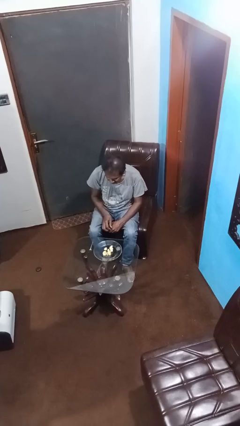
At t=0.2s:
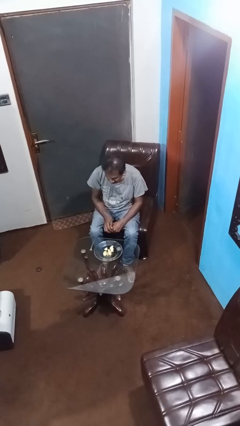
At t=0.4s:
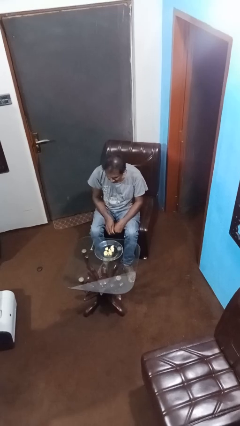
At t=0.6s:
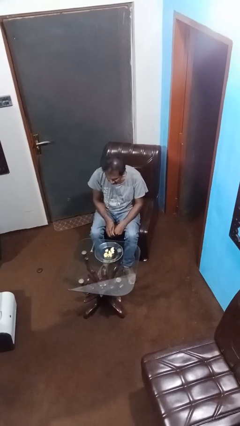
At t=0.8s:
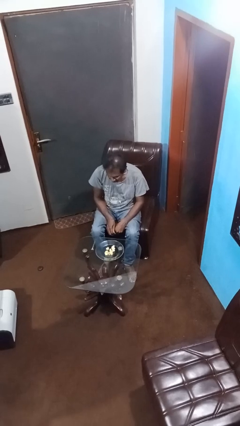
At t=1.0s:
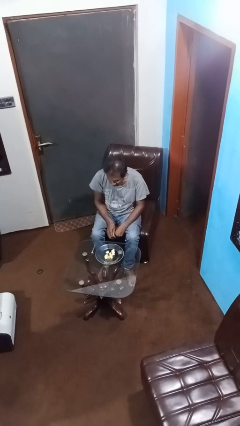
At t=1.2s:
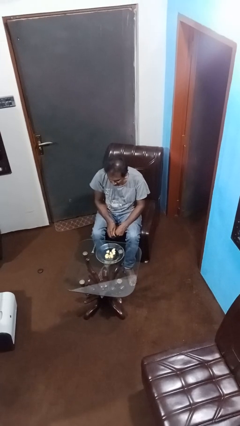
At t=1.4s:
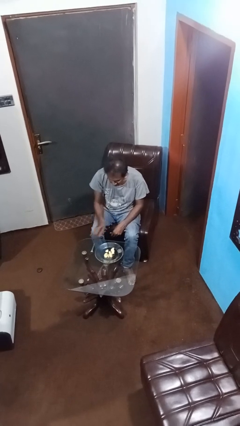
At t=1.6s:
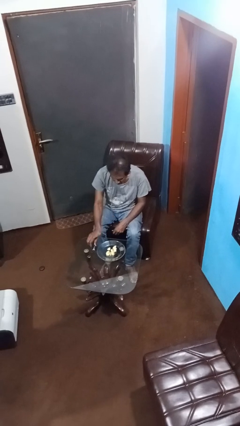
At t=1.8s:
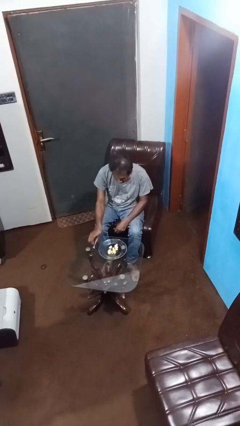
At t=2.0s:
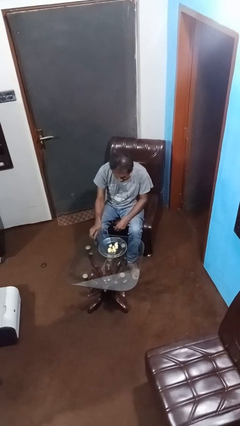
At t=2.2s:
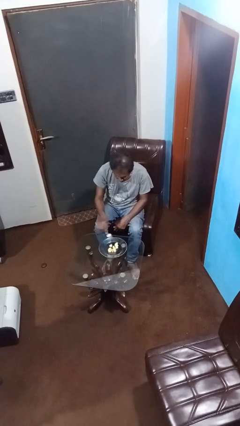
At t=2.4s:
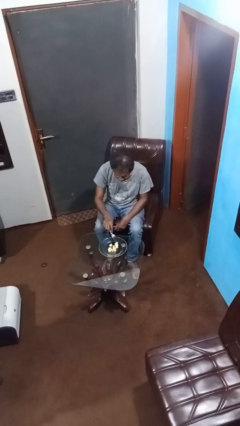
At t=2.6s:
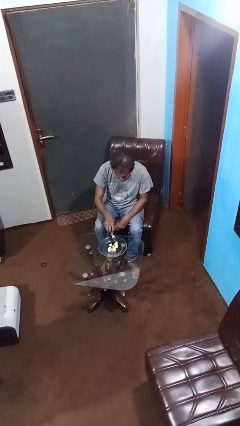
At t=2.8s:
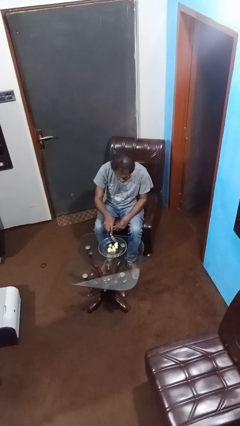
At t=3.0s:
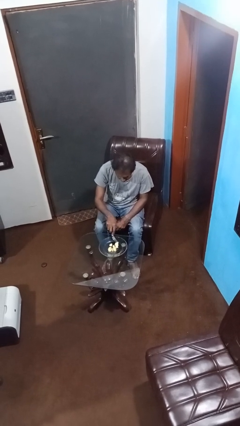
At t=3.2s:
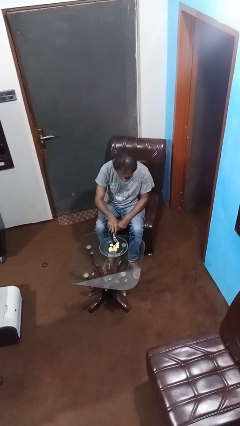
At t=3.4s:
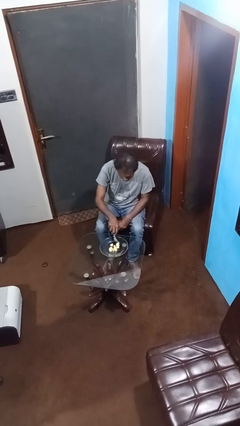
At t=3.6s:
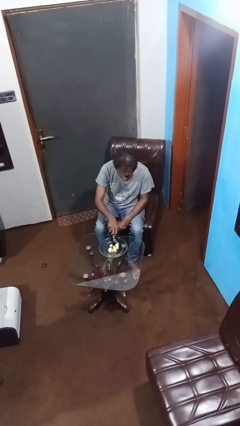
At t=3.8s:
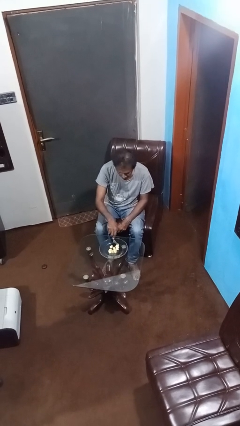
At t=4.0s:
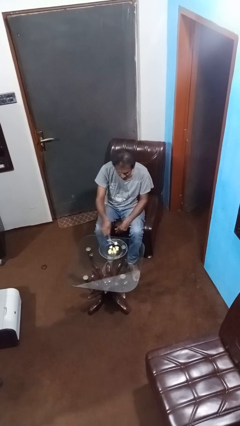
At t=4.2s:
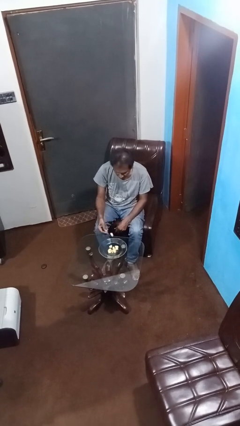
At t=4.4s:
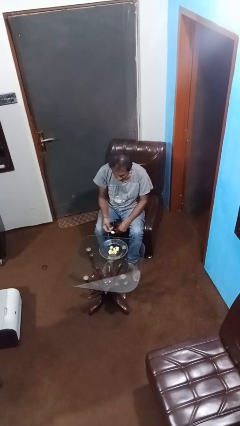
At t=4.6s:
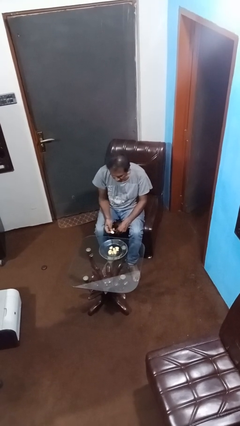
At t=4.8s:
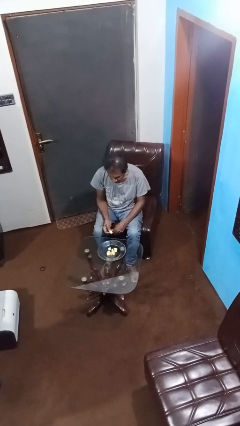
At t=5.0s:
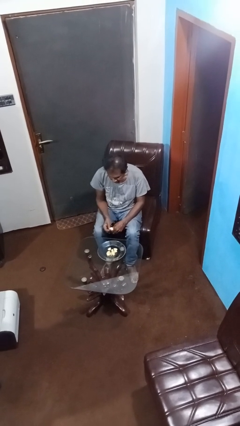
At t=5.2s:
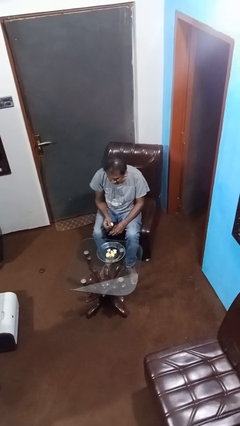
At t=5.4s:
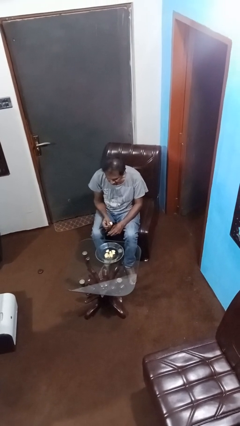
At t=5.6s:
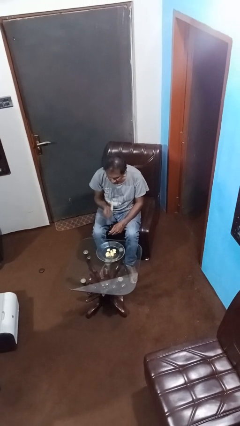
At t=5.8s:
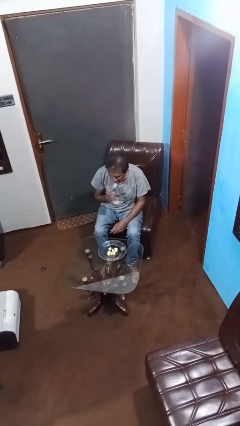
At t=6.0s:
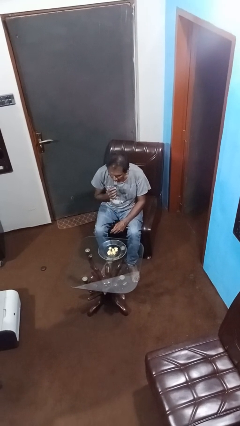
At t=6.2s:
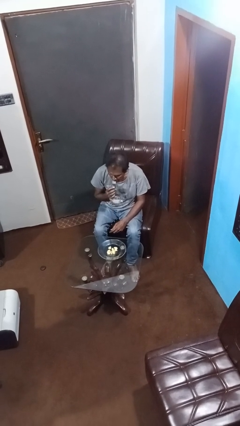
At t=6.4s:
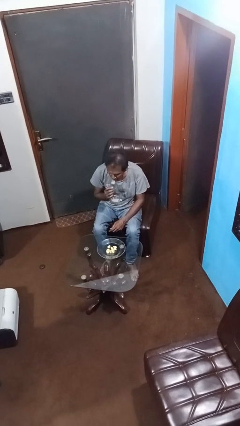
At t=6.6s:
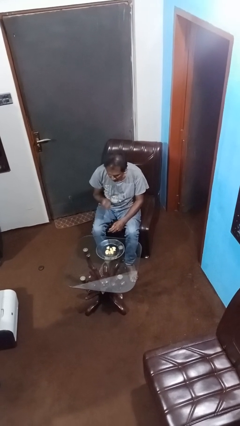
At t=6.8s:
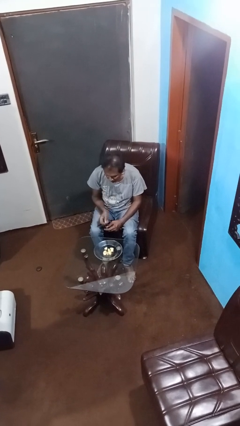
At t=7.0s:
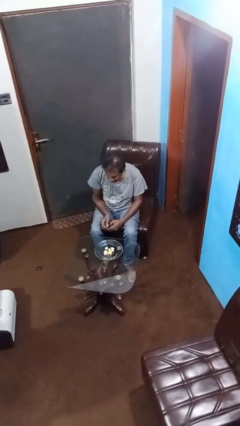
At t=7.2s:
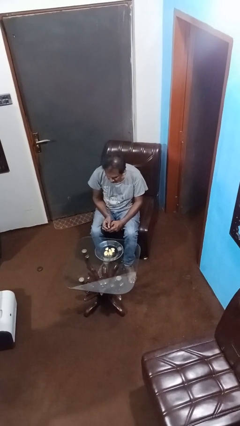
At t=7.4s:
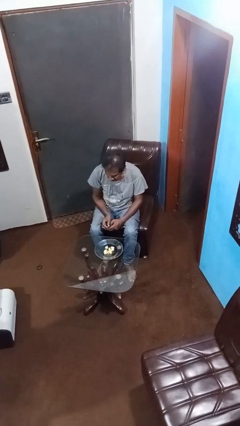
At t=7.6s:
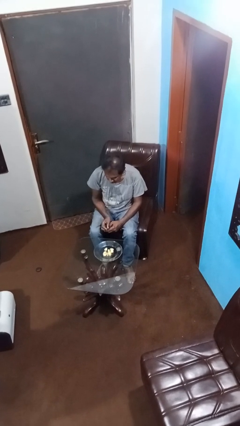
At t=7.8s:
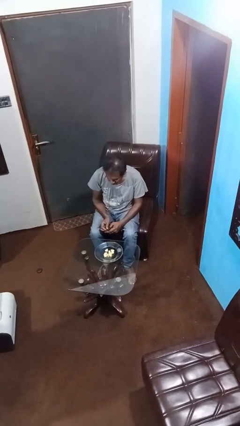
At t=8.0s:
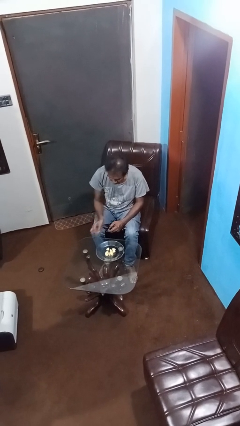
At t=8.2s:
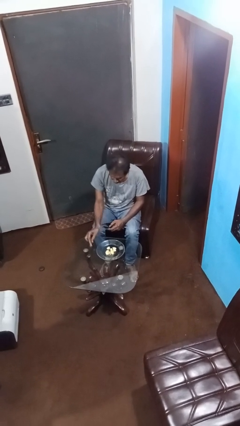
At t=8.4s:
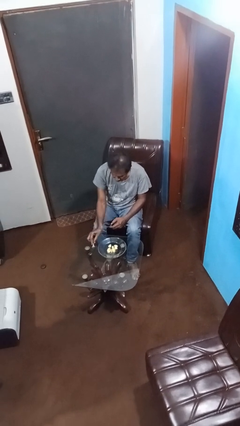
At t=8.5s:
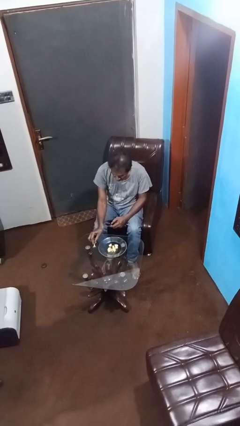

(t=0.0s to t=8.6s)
person eats with utensil

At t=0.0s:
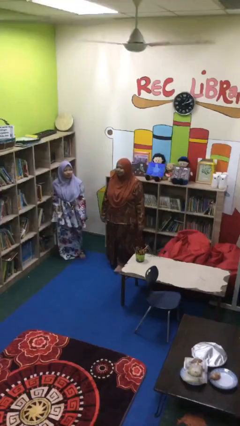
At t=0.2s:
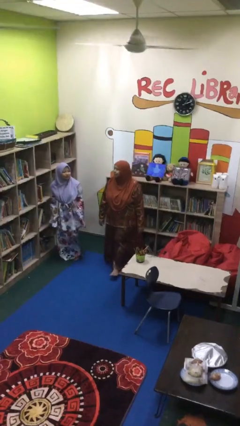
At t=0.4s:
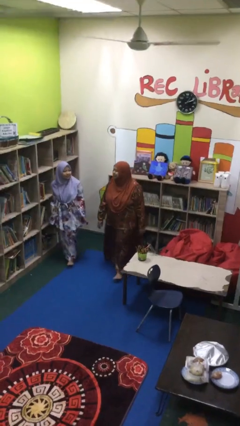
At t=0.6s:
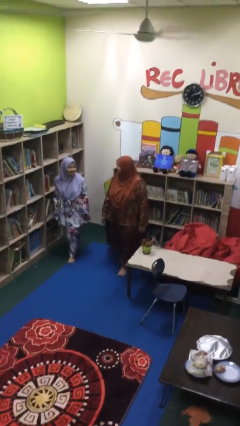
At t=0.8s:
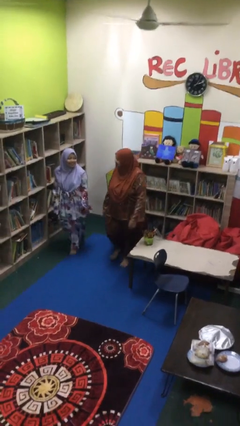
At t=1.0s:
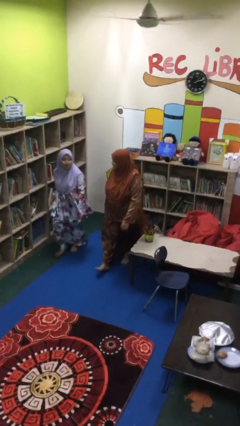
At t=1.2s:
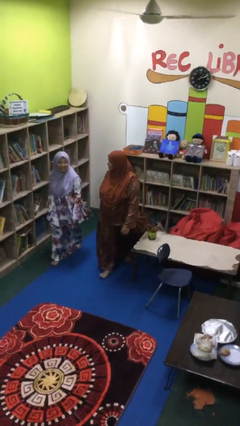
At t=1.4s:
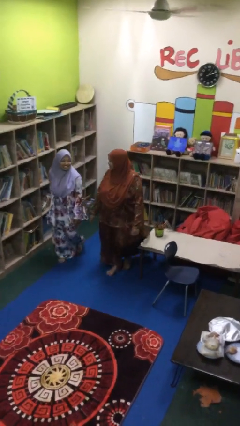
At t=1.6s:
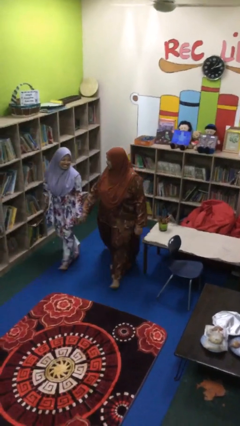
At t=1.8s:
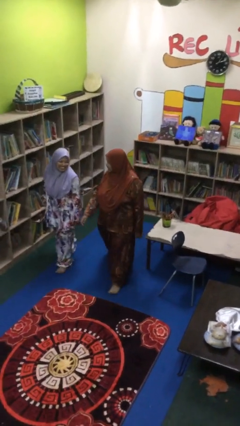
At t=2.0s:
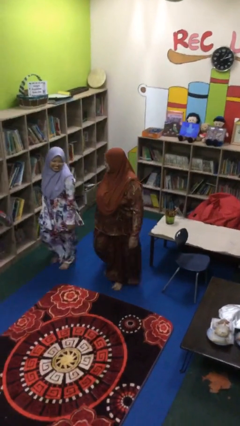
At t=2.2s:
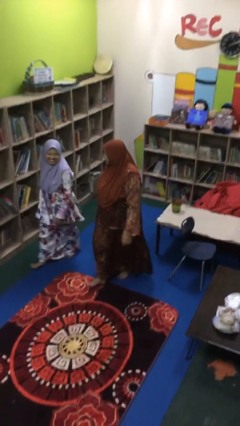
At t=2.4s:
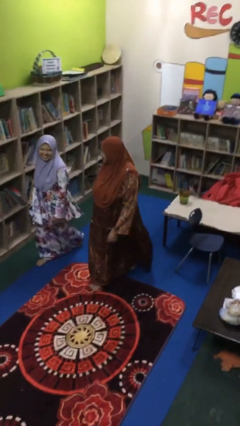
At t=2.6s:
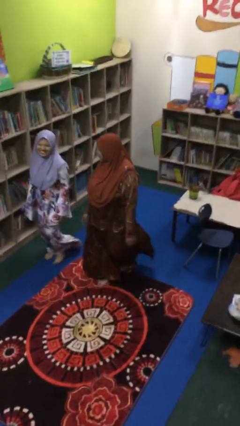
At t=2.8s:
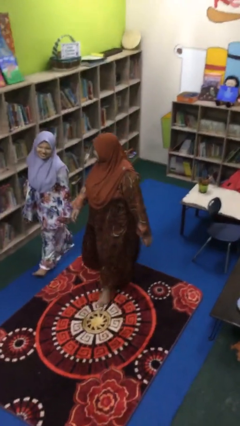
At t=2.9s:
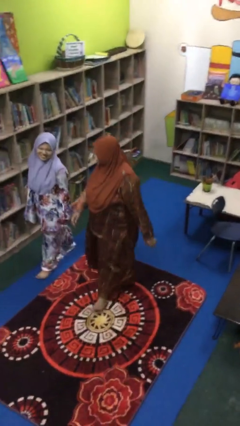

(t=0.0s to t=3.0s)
person talks to person

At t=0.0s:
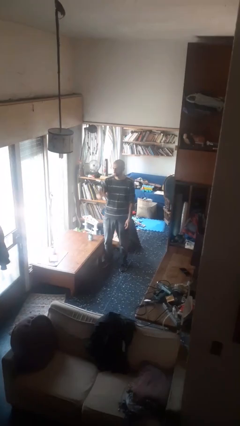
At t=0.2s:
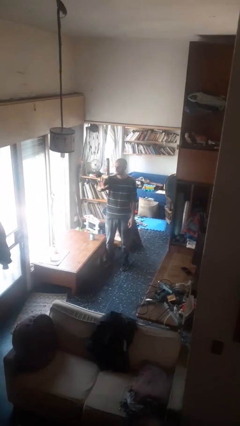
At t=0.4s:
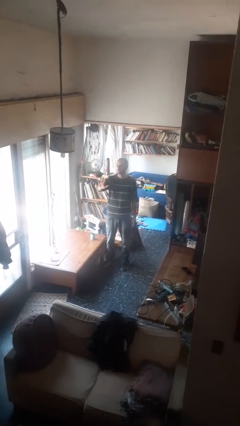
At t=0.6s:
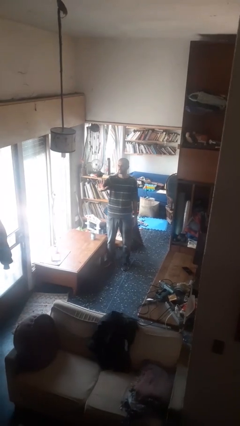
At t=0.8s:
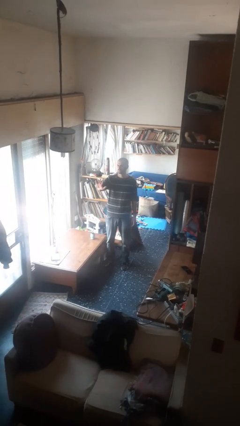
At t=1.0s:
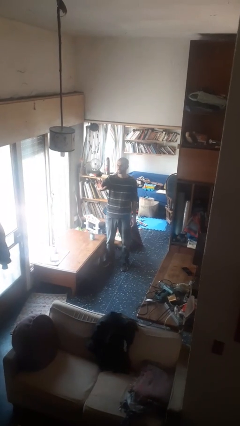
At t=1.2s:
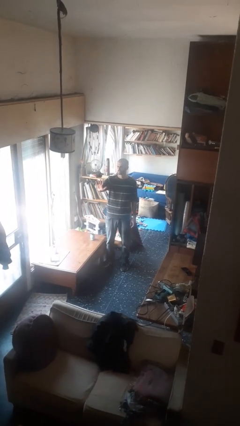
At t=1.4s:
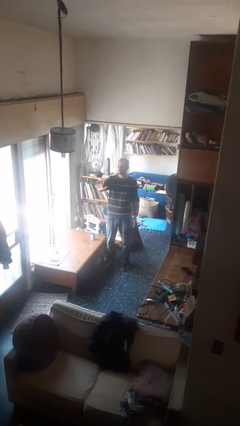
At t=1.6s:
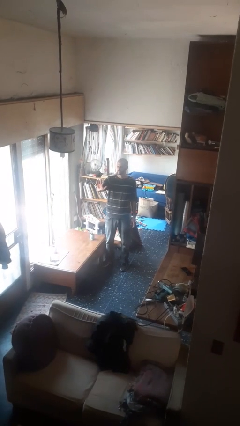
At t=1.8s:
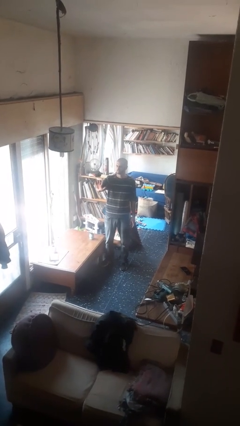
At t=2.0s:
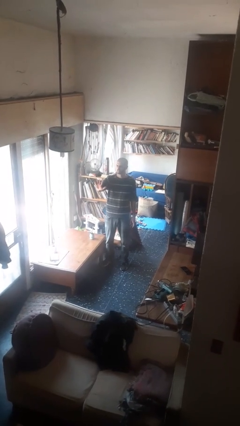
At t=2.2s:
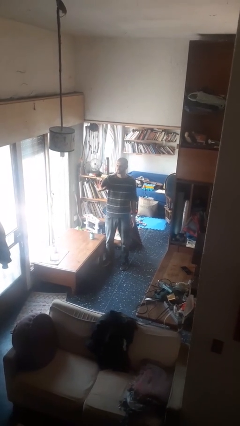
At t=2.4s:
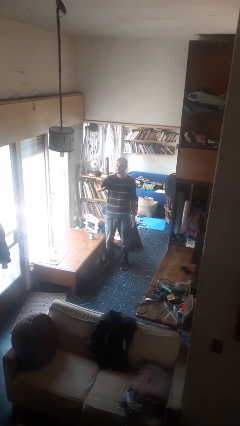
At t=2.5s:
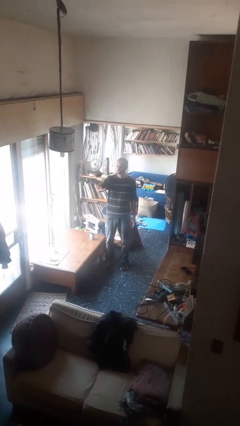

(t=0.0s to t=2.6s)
person gestures number five

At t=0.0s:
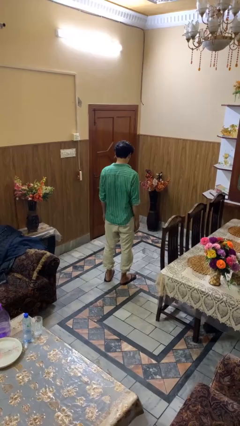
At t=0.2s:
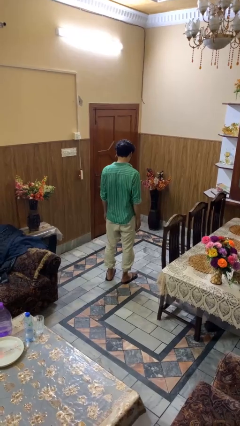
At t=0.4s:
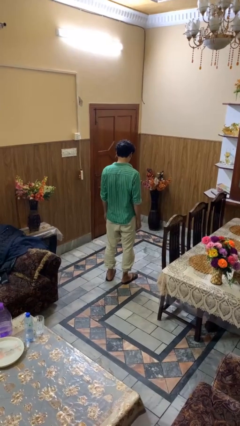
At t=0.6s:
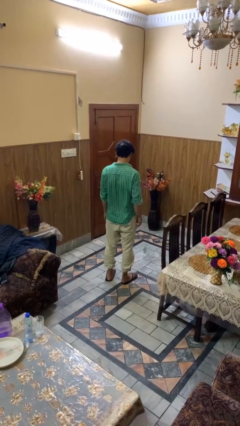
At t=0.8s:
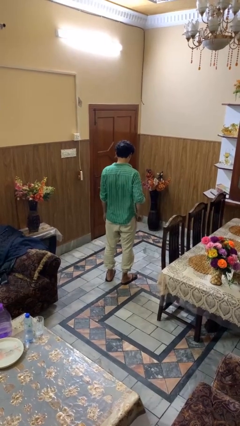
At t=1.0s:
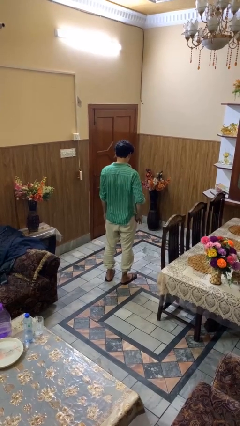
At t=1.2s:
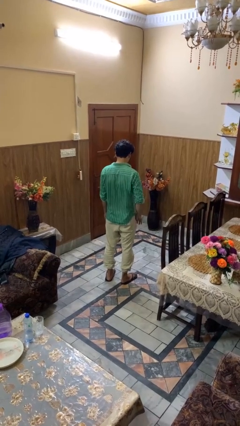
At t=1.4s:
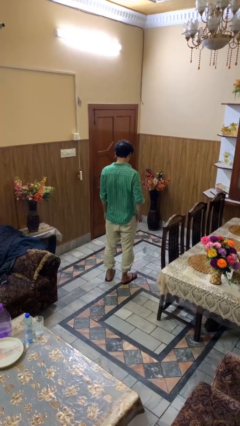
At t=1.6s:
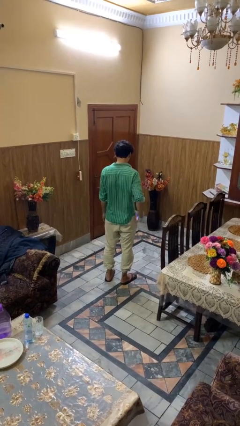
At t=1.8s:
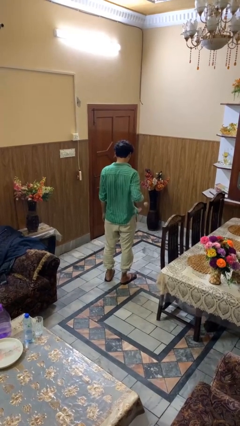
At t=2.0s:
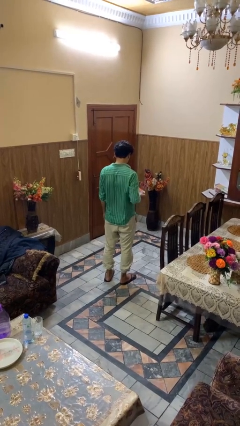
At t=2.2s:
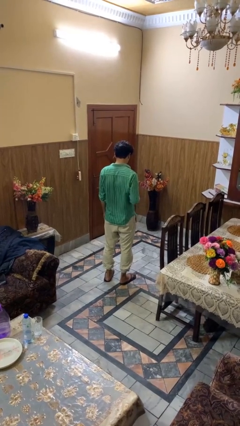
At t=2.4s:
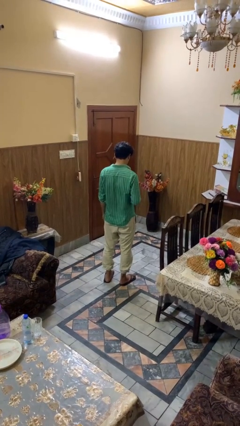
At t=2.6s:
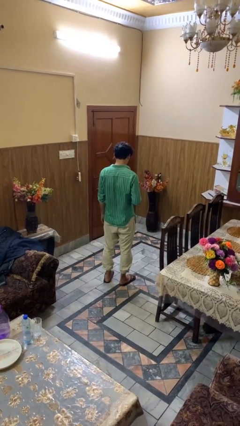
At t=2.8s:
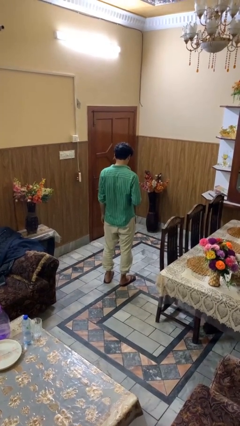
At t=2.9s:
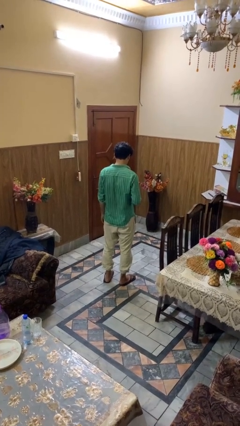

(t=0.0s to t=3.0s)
person takes phone from pocket

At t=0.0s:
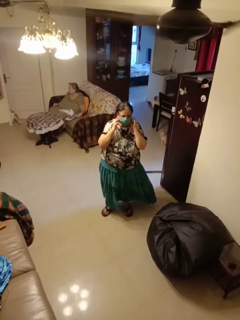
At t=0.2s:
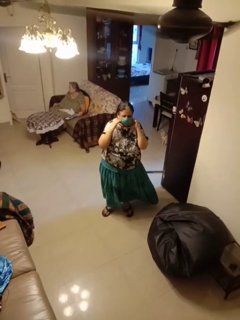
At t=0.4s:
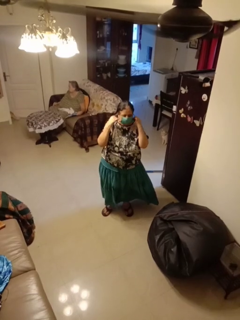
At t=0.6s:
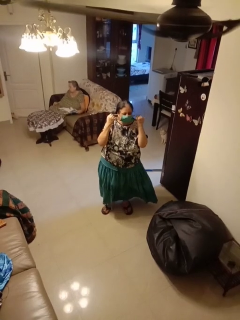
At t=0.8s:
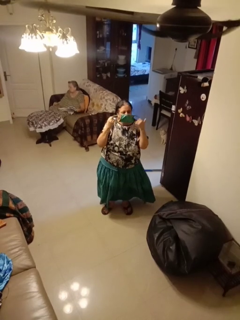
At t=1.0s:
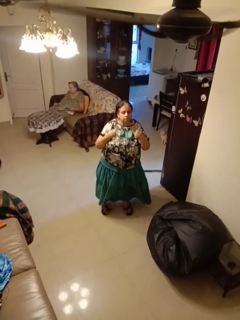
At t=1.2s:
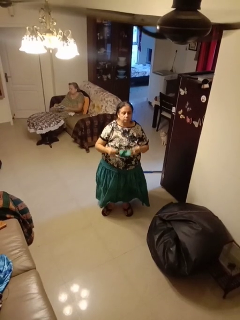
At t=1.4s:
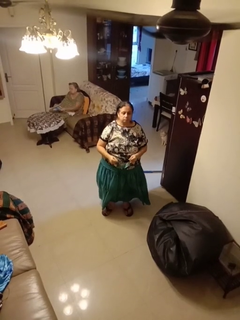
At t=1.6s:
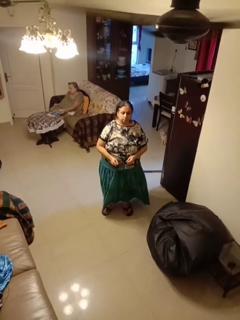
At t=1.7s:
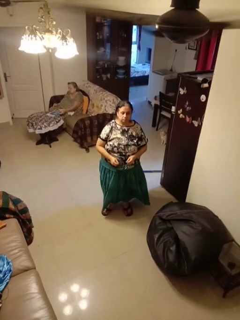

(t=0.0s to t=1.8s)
person takes off facemask
